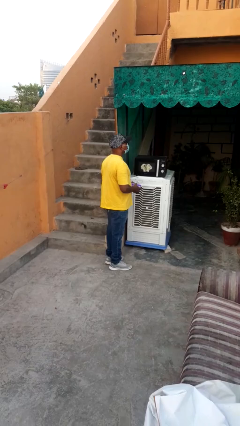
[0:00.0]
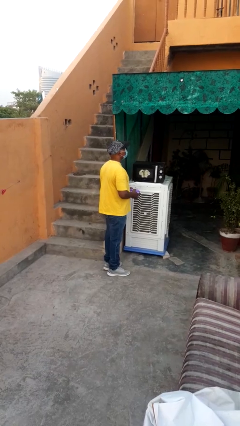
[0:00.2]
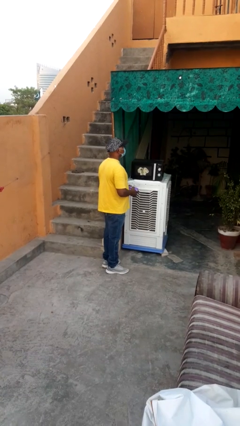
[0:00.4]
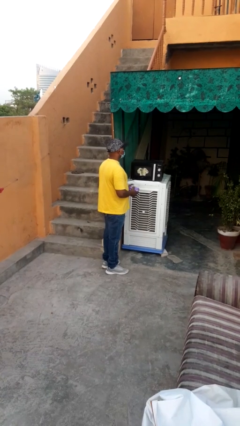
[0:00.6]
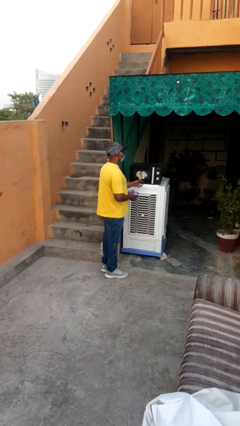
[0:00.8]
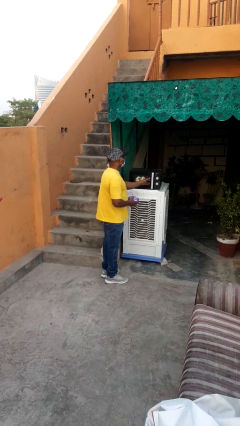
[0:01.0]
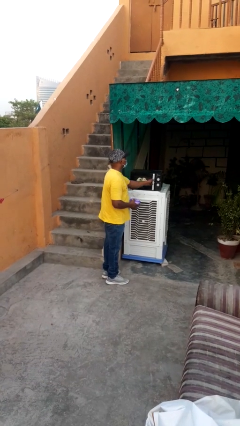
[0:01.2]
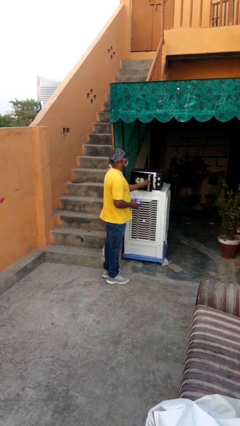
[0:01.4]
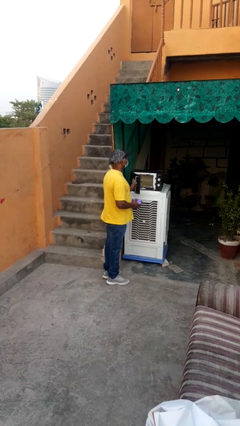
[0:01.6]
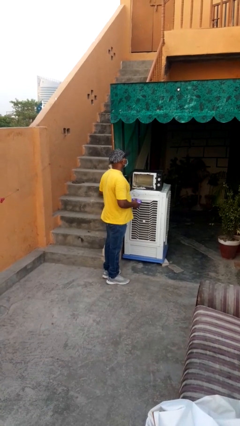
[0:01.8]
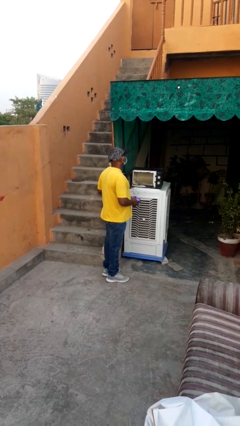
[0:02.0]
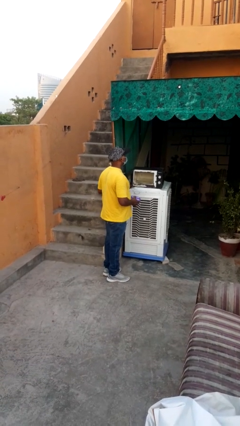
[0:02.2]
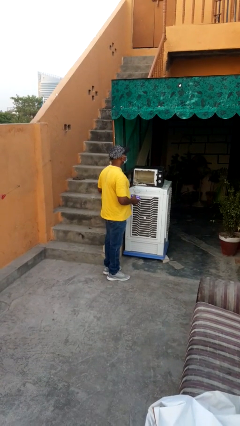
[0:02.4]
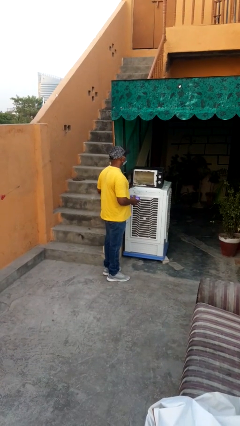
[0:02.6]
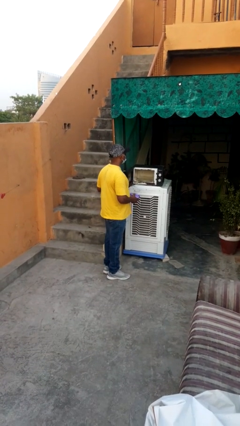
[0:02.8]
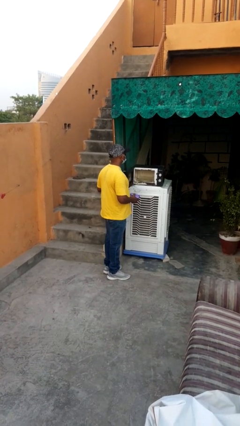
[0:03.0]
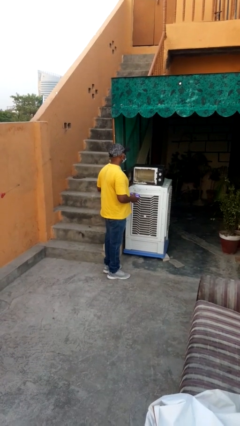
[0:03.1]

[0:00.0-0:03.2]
person opens microwave

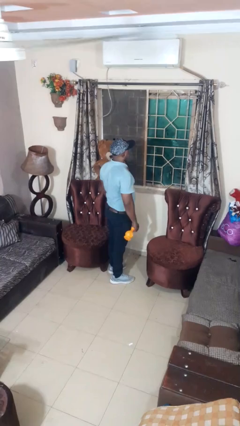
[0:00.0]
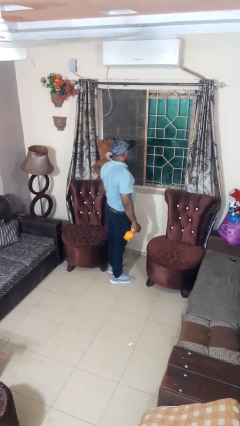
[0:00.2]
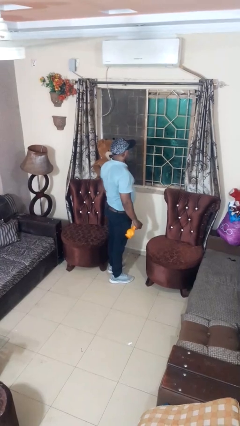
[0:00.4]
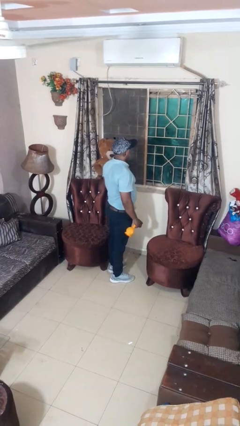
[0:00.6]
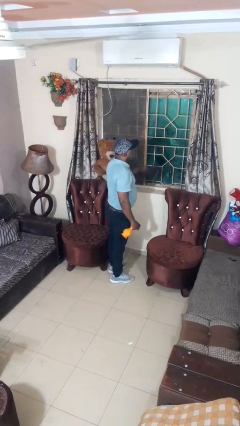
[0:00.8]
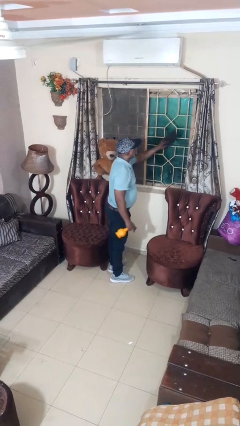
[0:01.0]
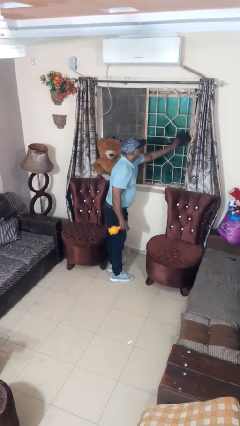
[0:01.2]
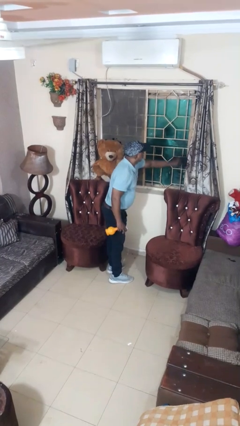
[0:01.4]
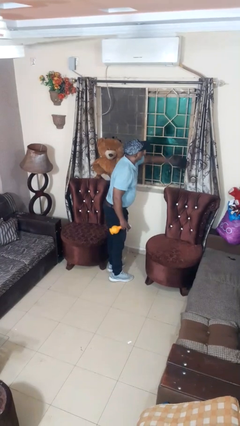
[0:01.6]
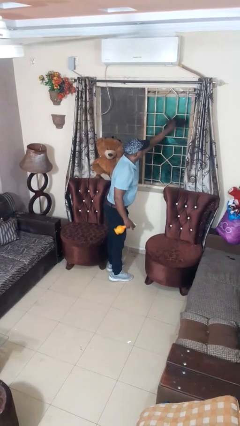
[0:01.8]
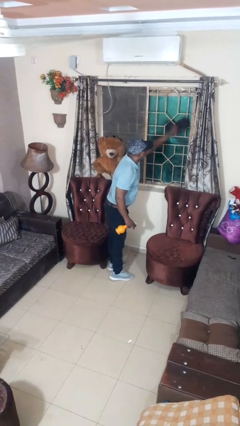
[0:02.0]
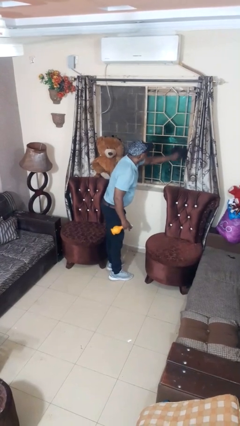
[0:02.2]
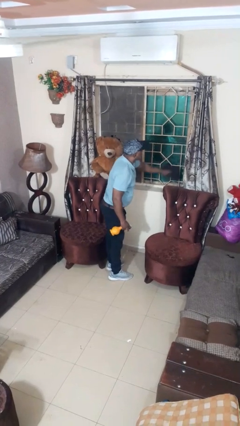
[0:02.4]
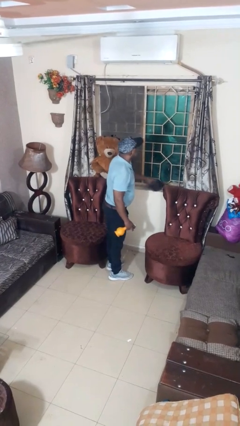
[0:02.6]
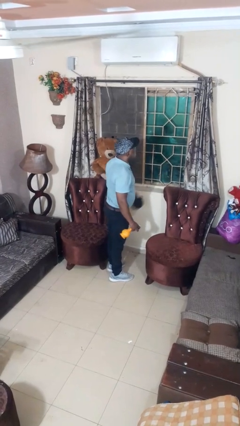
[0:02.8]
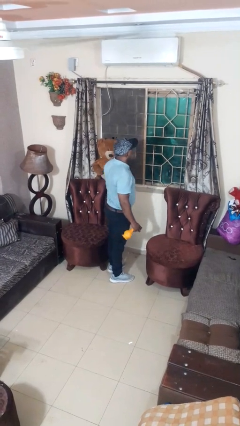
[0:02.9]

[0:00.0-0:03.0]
person washes window

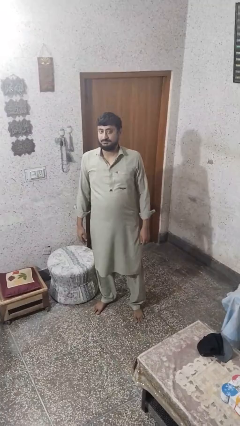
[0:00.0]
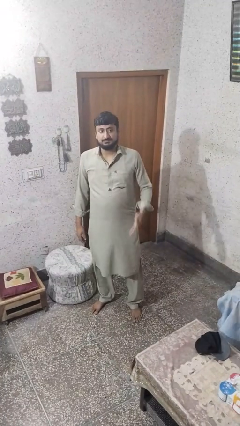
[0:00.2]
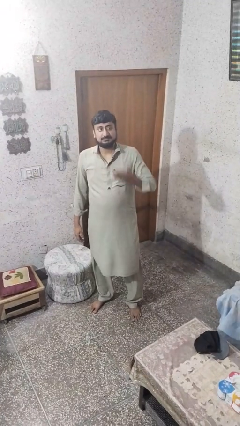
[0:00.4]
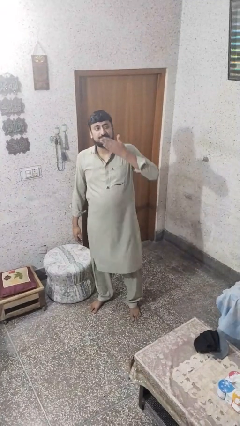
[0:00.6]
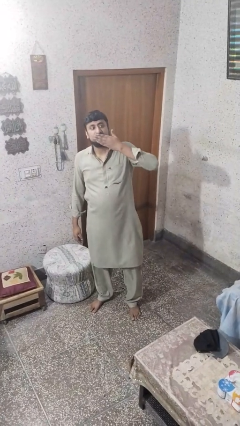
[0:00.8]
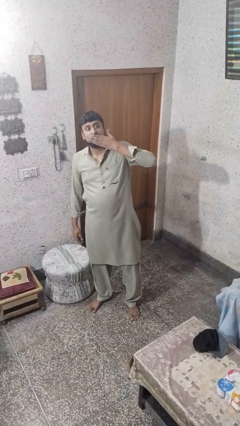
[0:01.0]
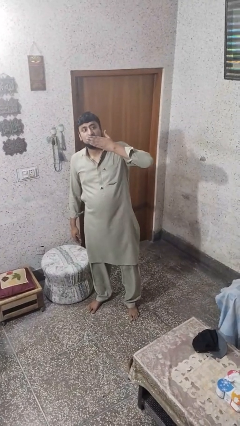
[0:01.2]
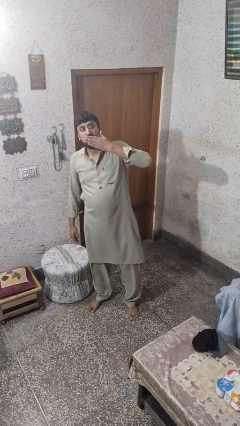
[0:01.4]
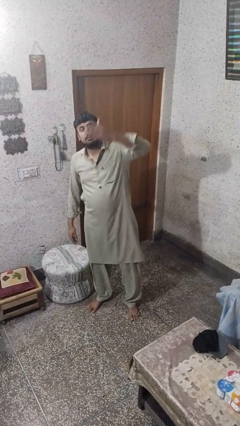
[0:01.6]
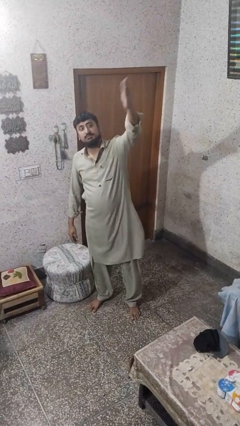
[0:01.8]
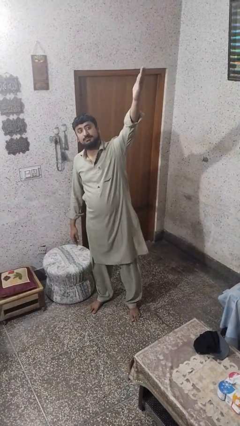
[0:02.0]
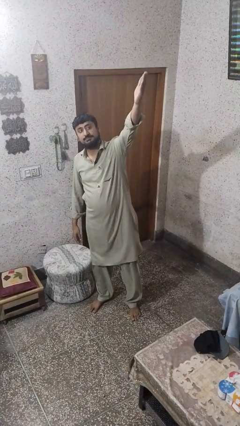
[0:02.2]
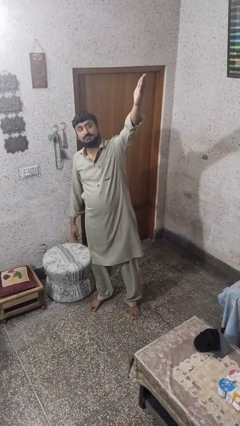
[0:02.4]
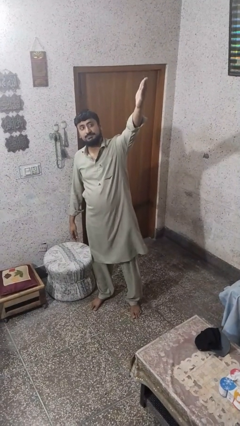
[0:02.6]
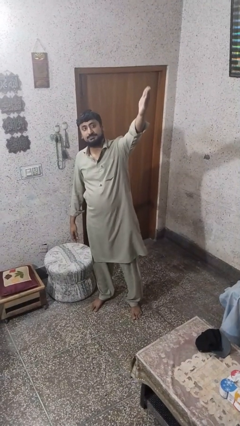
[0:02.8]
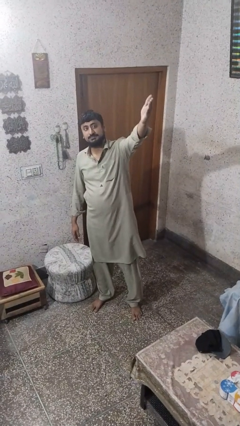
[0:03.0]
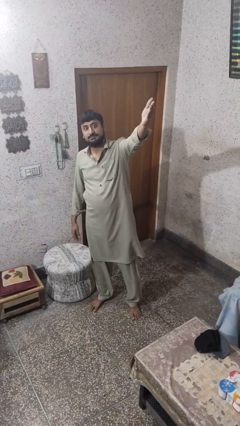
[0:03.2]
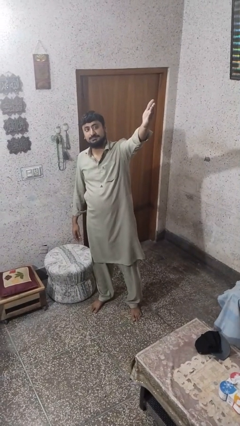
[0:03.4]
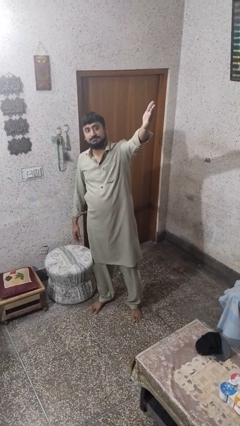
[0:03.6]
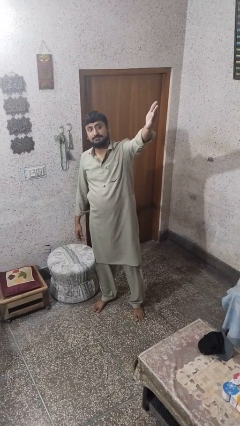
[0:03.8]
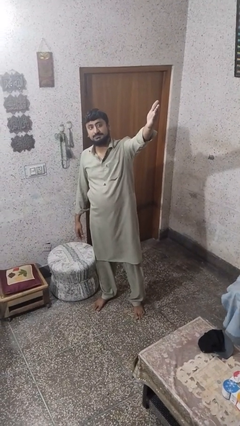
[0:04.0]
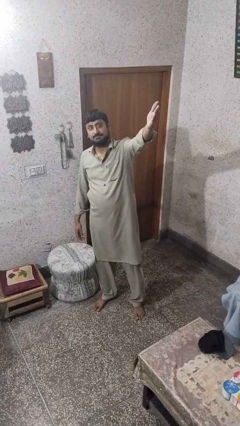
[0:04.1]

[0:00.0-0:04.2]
person gestures blow kiss

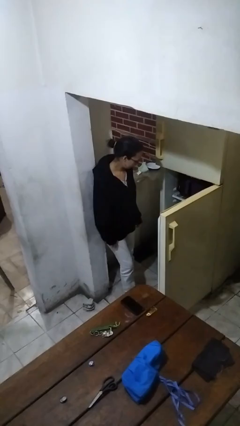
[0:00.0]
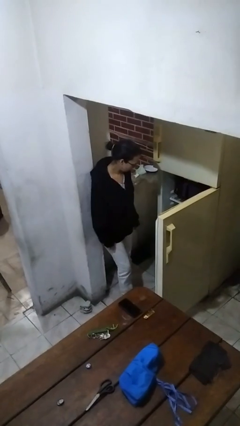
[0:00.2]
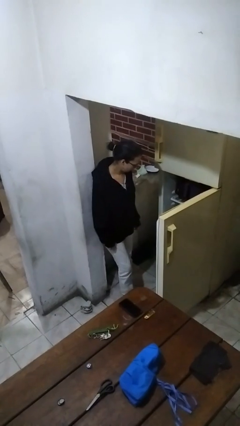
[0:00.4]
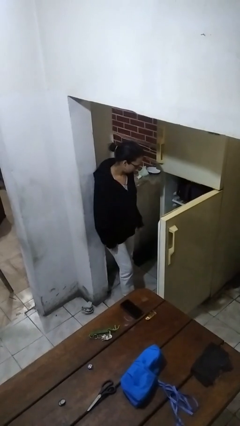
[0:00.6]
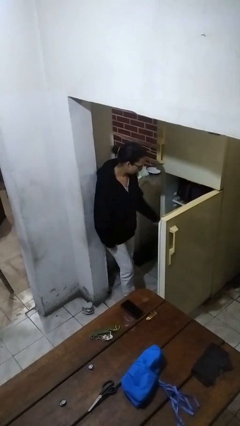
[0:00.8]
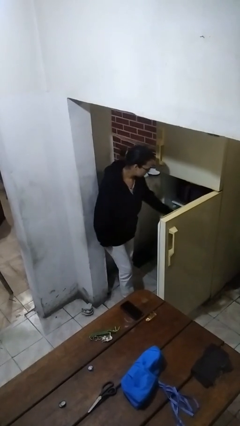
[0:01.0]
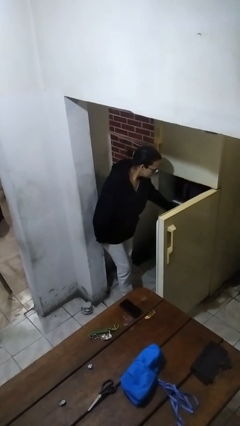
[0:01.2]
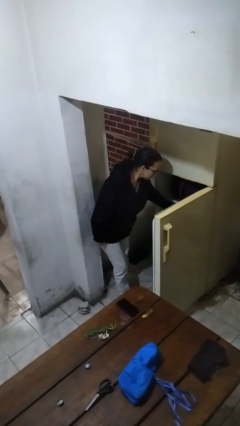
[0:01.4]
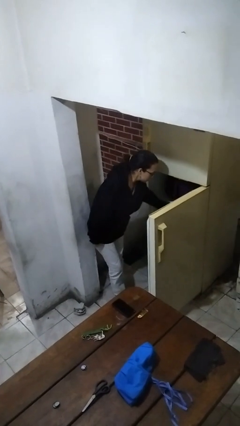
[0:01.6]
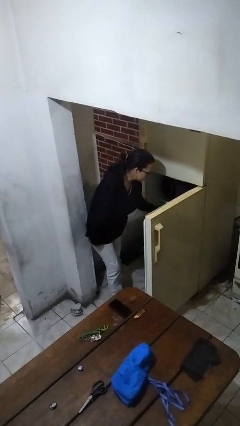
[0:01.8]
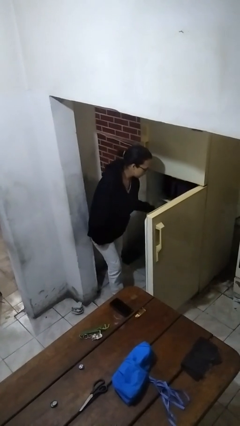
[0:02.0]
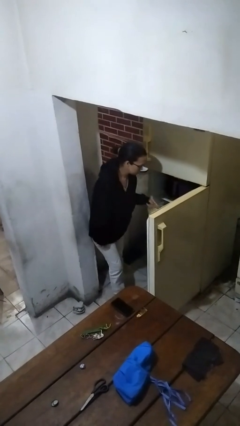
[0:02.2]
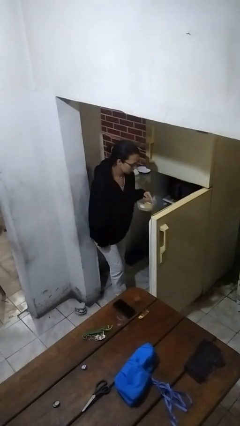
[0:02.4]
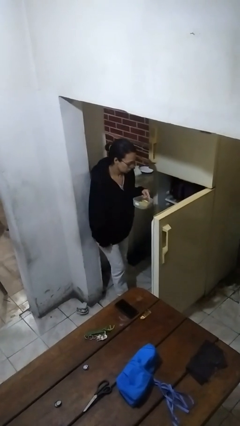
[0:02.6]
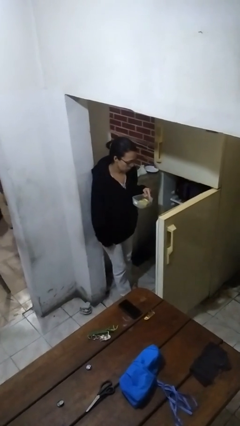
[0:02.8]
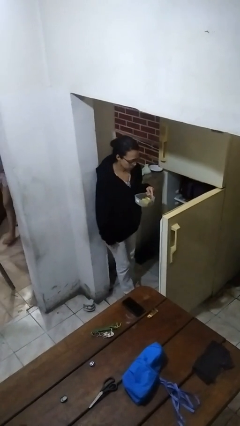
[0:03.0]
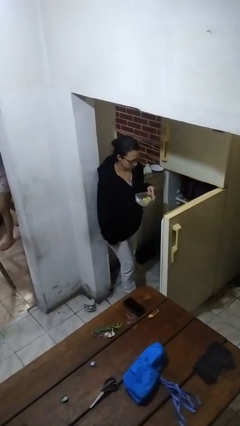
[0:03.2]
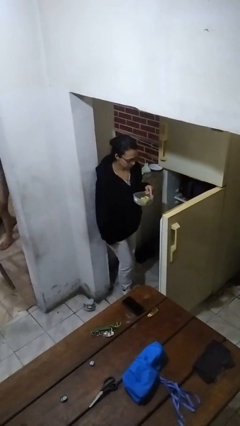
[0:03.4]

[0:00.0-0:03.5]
person takes object from refrigerator

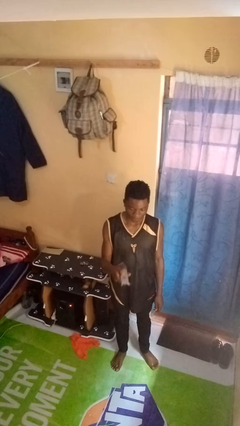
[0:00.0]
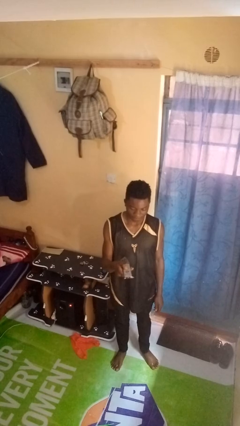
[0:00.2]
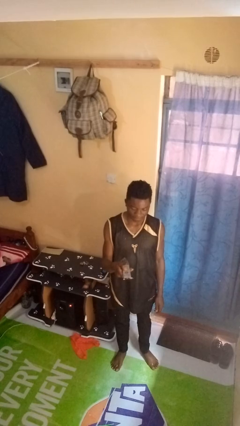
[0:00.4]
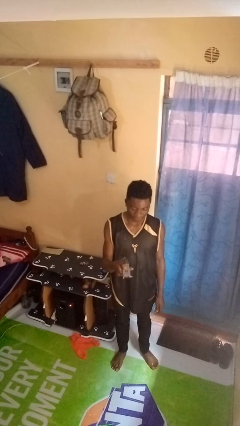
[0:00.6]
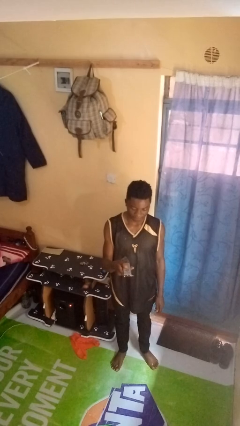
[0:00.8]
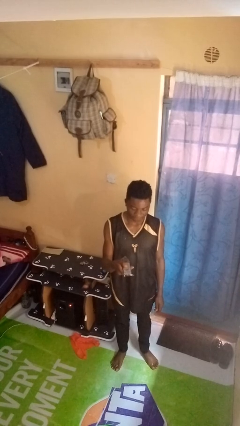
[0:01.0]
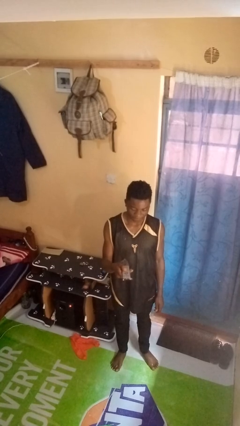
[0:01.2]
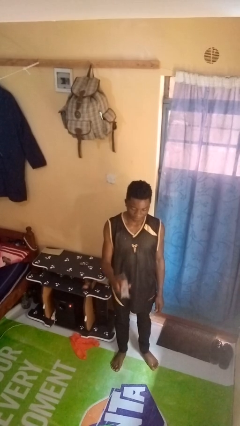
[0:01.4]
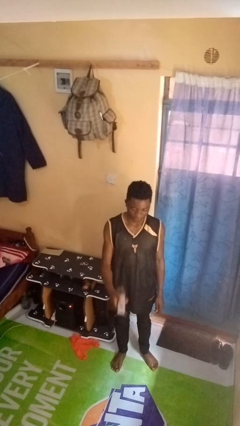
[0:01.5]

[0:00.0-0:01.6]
person uses television remote

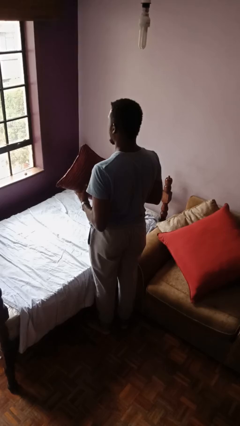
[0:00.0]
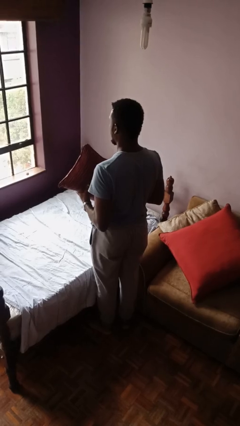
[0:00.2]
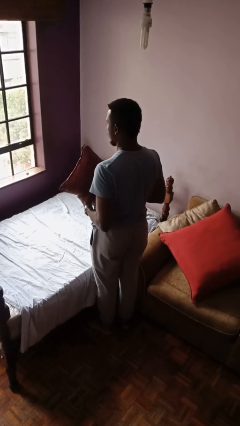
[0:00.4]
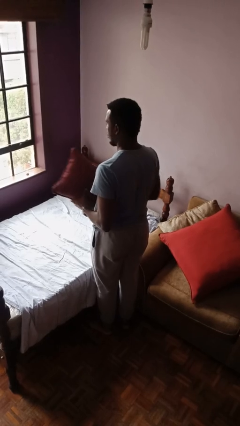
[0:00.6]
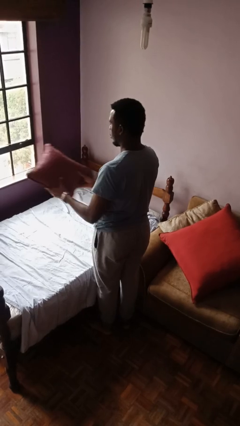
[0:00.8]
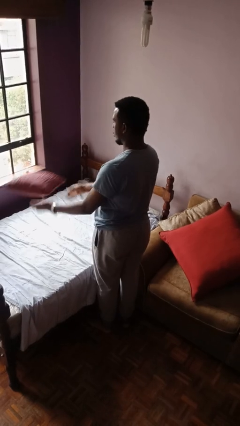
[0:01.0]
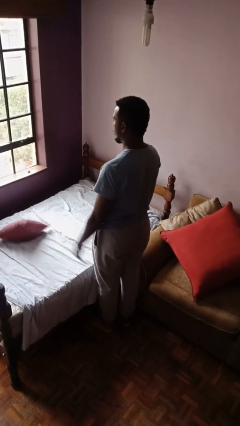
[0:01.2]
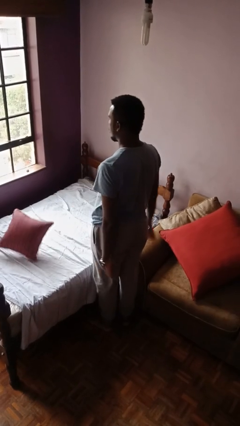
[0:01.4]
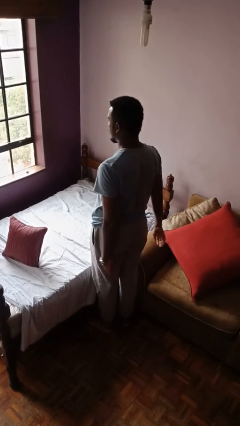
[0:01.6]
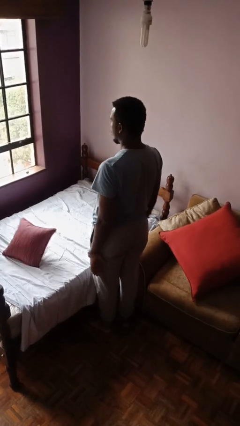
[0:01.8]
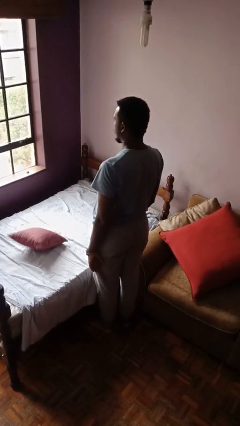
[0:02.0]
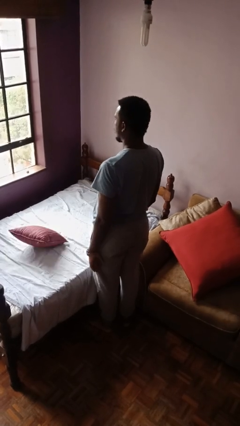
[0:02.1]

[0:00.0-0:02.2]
person throws object on bed
